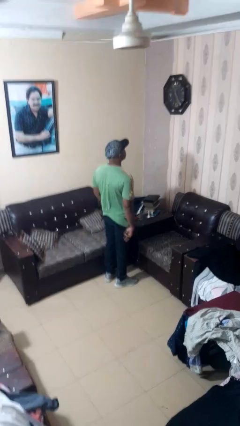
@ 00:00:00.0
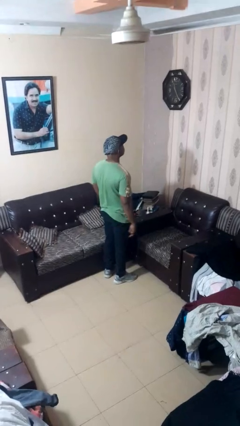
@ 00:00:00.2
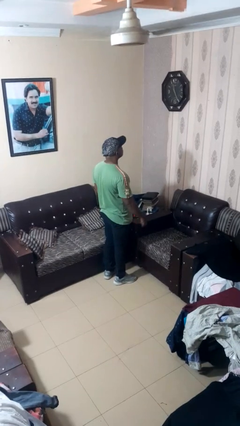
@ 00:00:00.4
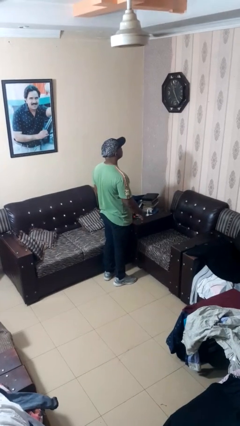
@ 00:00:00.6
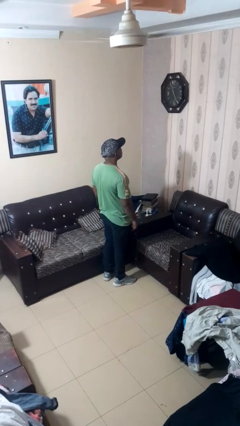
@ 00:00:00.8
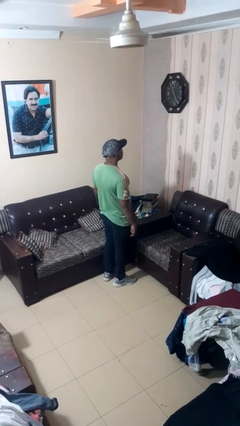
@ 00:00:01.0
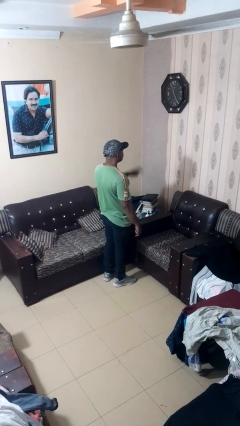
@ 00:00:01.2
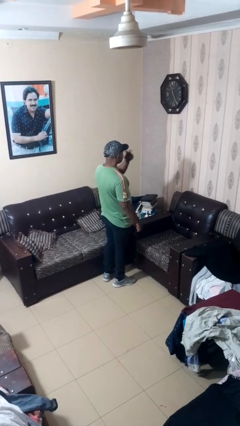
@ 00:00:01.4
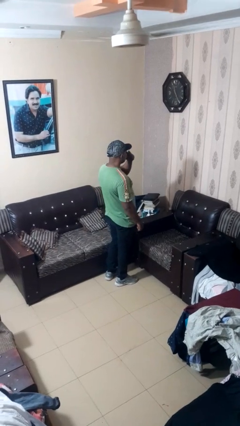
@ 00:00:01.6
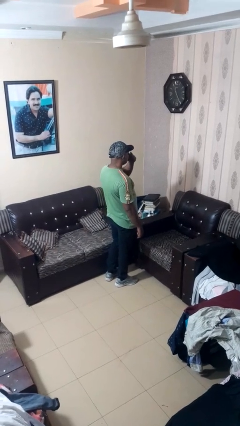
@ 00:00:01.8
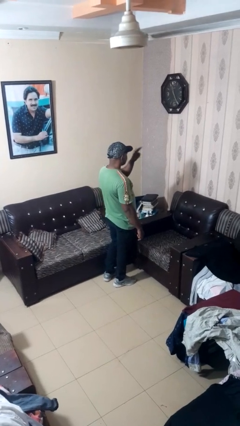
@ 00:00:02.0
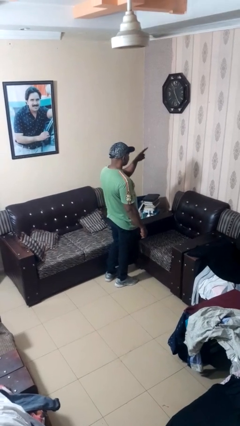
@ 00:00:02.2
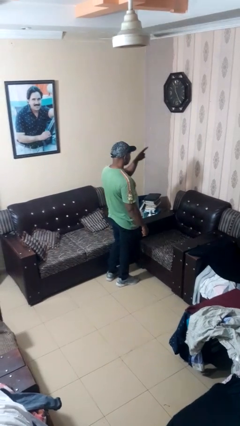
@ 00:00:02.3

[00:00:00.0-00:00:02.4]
person gestures watch closely

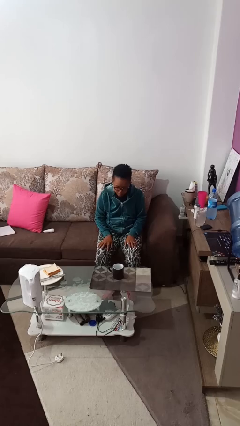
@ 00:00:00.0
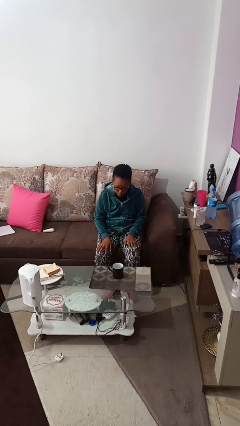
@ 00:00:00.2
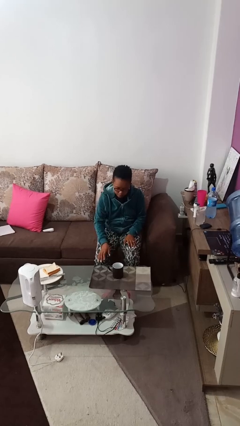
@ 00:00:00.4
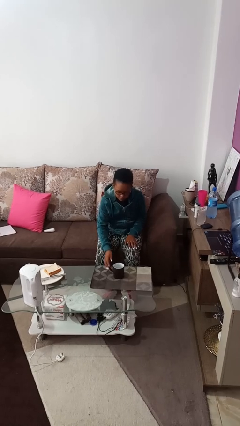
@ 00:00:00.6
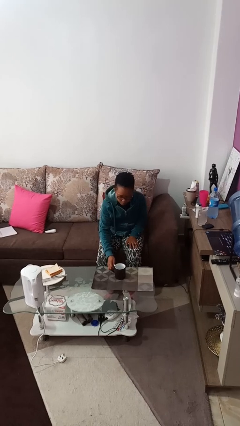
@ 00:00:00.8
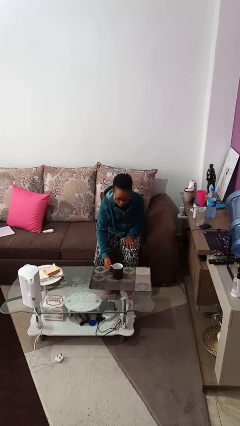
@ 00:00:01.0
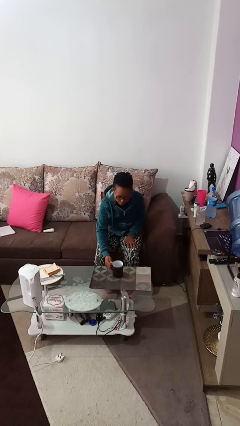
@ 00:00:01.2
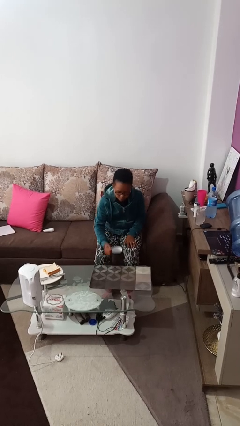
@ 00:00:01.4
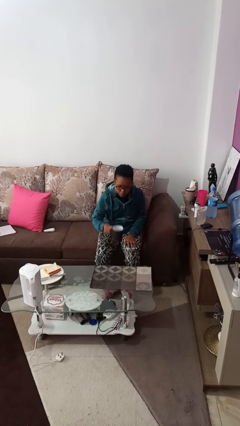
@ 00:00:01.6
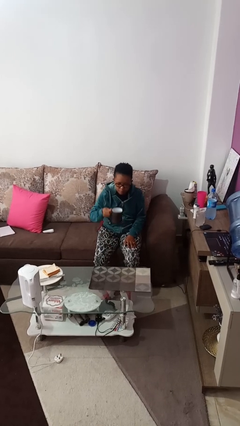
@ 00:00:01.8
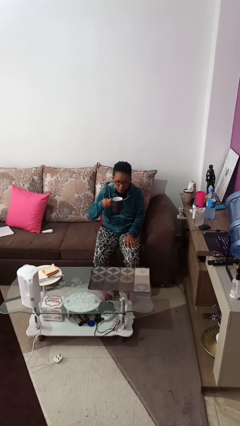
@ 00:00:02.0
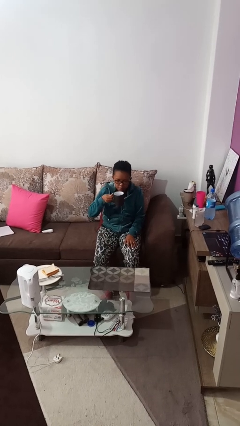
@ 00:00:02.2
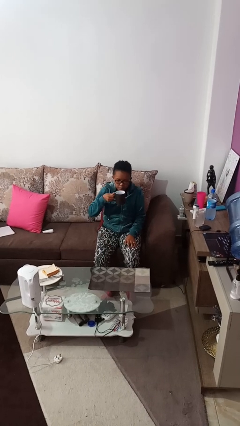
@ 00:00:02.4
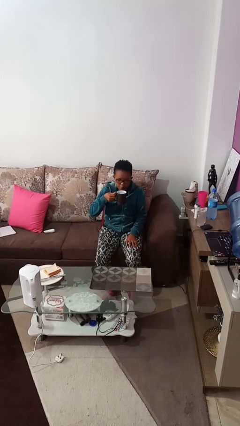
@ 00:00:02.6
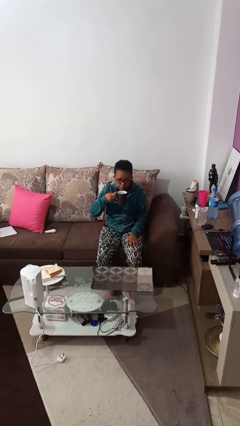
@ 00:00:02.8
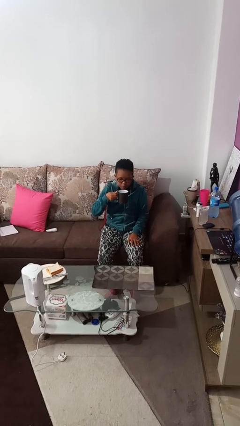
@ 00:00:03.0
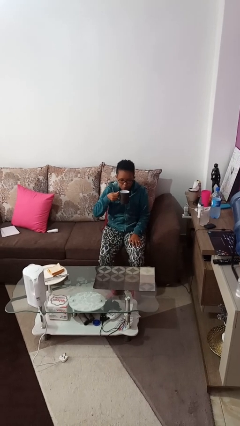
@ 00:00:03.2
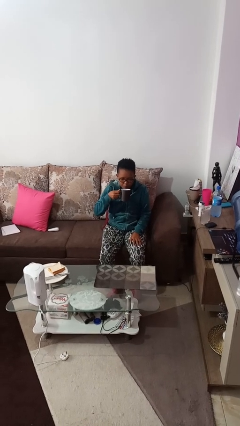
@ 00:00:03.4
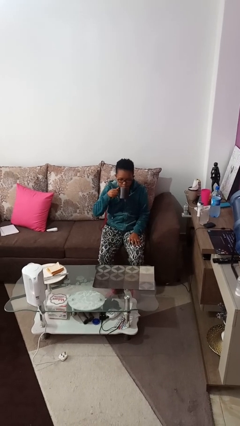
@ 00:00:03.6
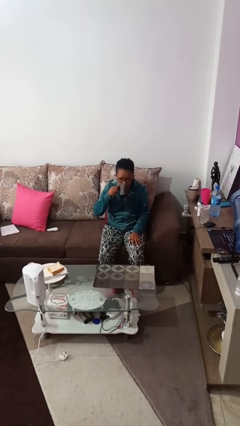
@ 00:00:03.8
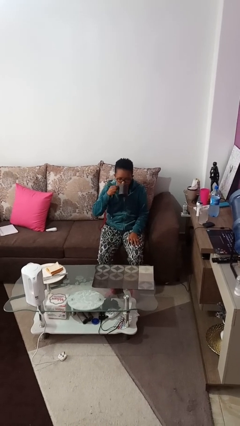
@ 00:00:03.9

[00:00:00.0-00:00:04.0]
person picks up object from table

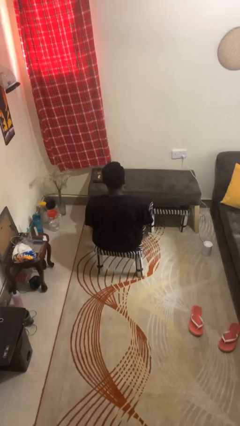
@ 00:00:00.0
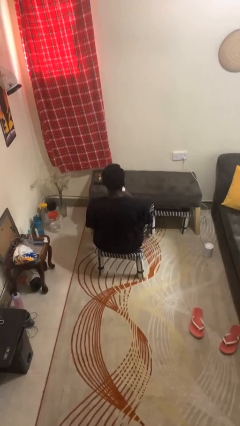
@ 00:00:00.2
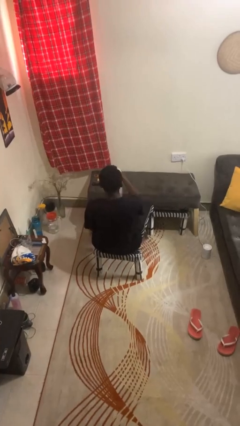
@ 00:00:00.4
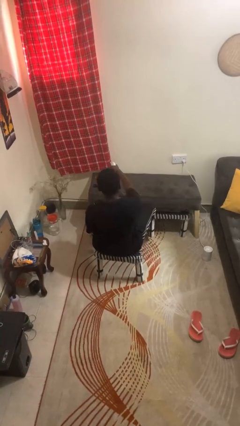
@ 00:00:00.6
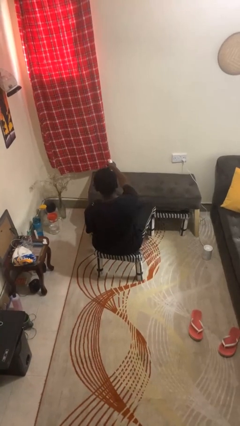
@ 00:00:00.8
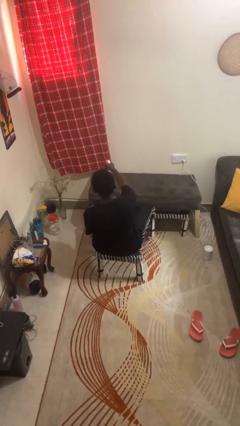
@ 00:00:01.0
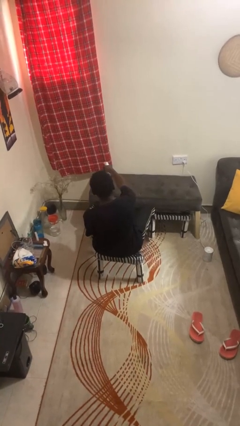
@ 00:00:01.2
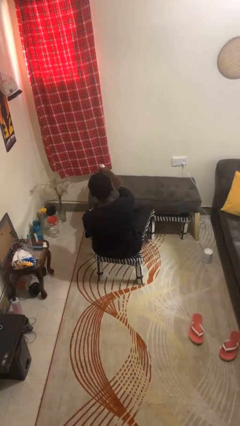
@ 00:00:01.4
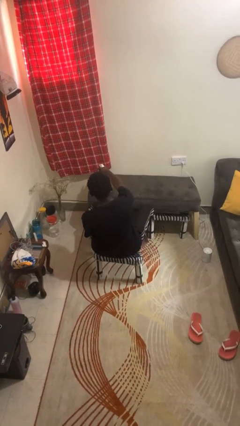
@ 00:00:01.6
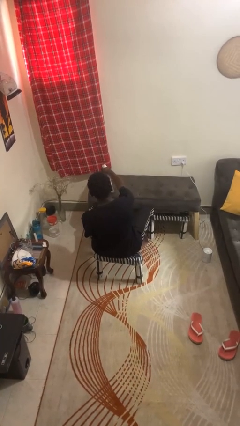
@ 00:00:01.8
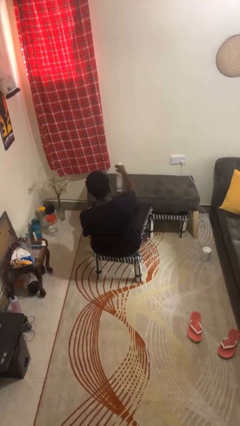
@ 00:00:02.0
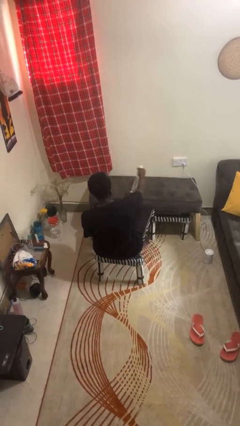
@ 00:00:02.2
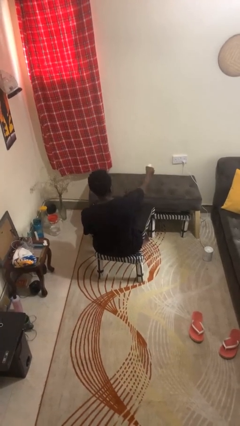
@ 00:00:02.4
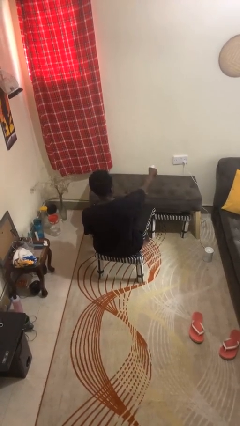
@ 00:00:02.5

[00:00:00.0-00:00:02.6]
person sprays from bottle

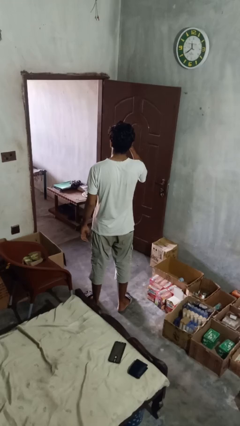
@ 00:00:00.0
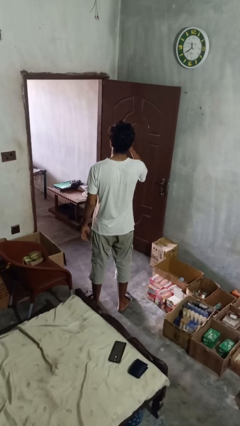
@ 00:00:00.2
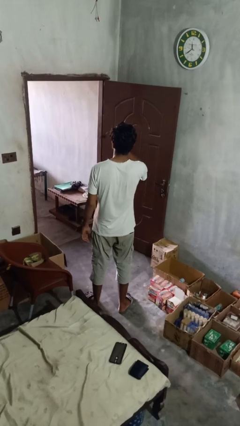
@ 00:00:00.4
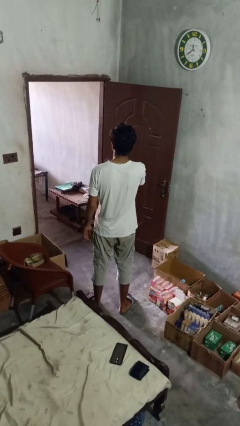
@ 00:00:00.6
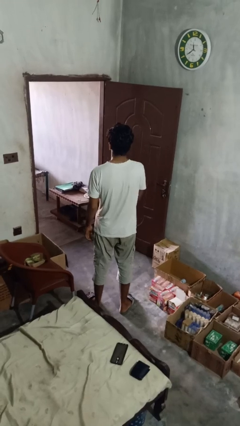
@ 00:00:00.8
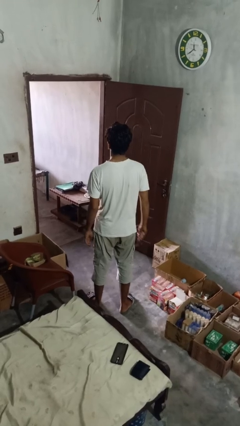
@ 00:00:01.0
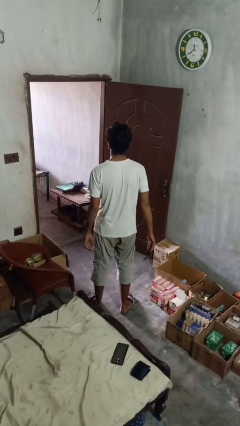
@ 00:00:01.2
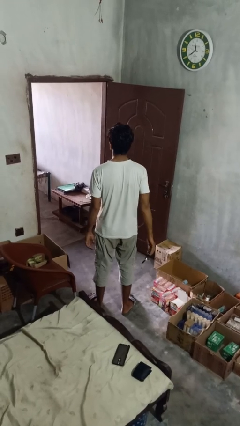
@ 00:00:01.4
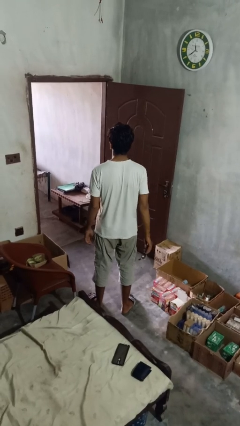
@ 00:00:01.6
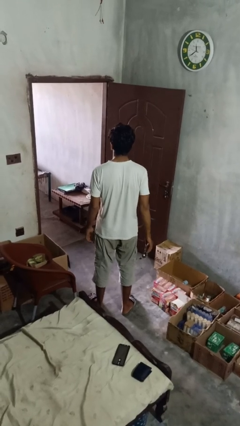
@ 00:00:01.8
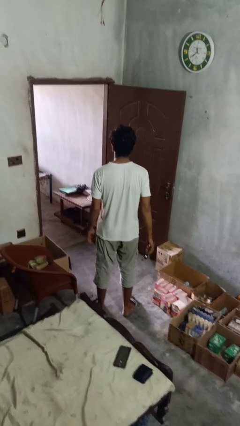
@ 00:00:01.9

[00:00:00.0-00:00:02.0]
person takes off glasses

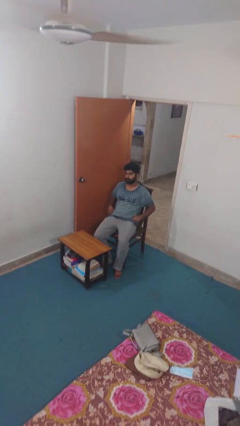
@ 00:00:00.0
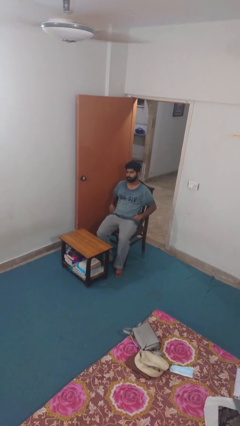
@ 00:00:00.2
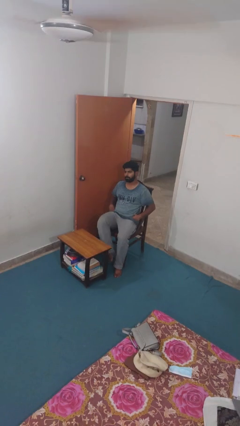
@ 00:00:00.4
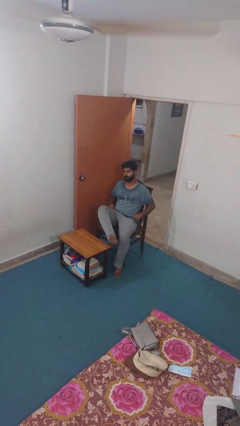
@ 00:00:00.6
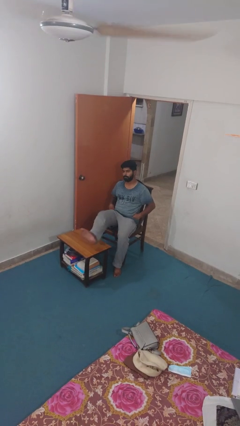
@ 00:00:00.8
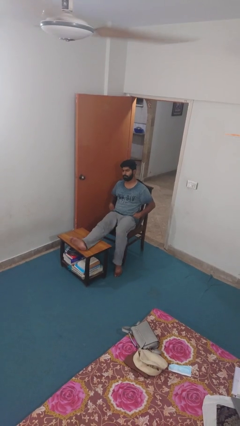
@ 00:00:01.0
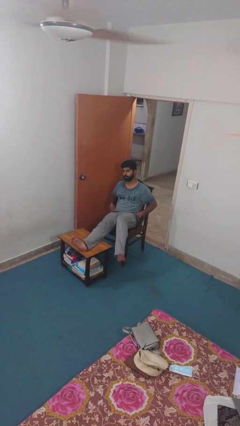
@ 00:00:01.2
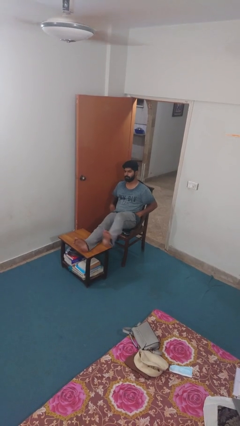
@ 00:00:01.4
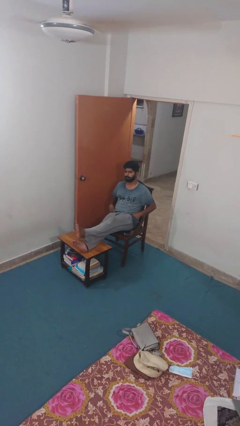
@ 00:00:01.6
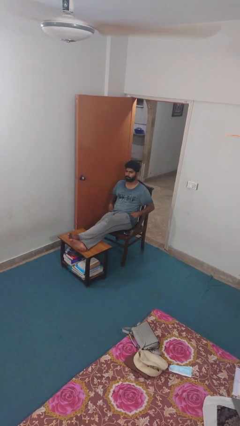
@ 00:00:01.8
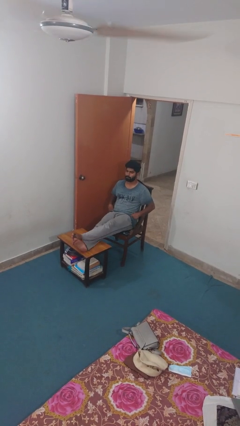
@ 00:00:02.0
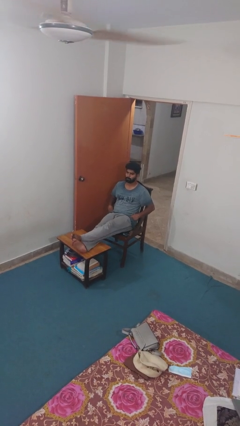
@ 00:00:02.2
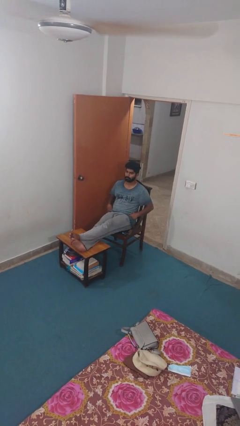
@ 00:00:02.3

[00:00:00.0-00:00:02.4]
person puts feet up

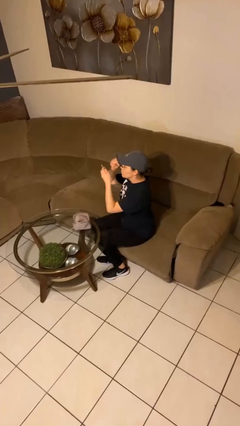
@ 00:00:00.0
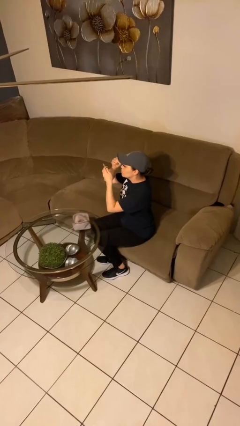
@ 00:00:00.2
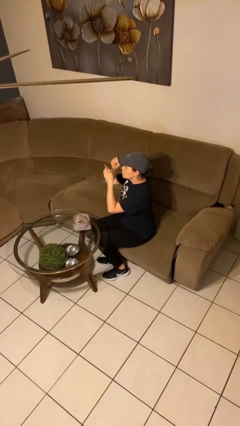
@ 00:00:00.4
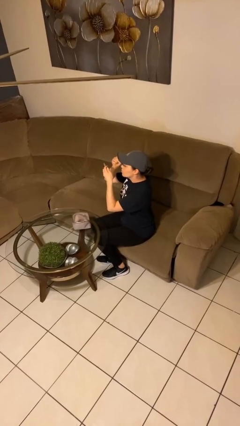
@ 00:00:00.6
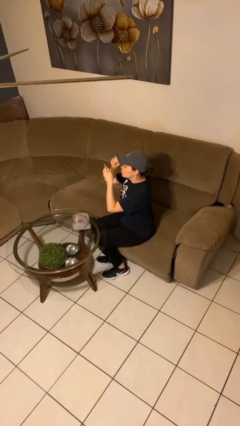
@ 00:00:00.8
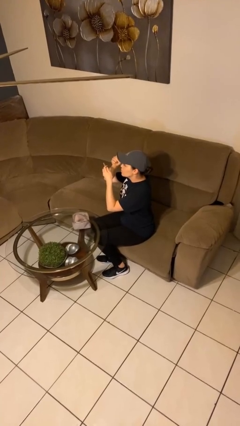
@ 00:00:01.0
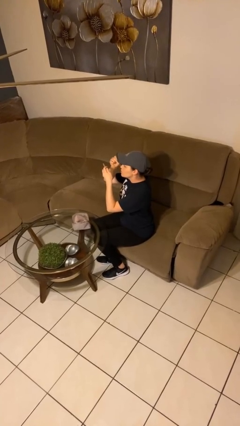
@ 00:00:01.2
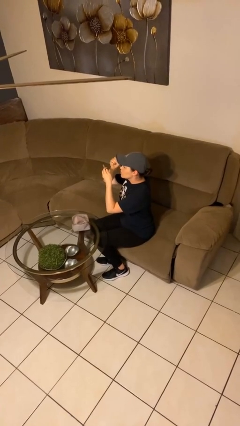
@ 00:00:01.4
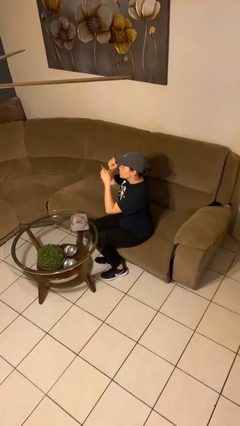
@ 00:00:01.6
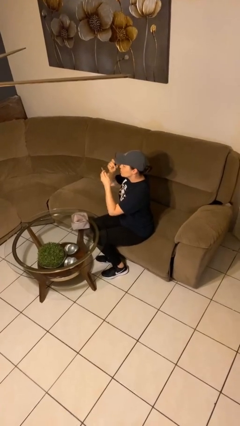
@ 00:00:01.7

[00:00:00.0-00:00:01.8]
person applies eye makeup

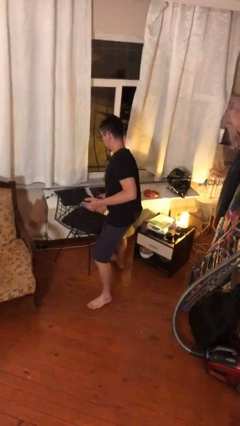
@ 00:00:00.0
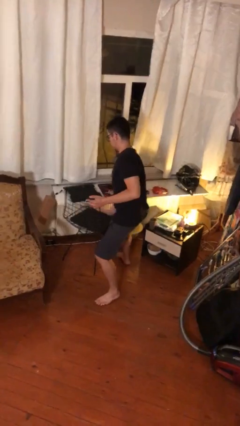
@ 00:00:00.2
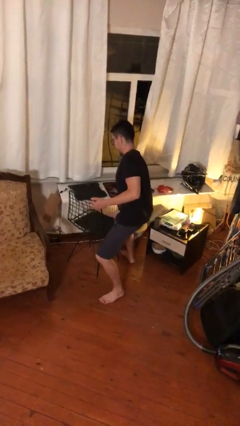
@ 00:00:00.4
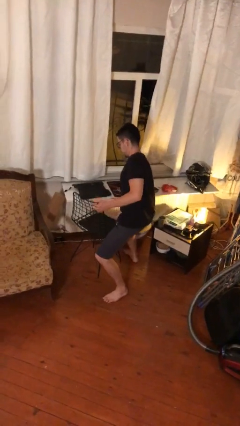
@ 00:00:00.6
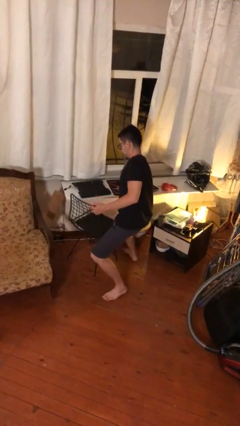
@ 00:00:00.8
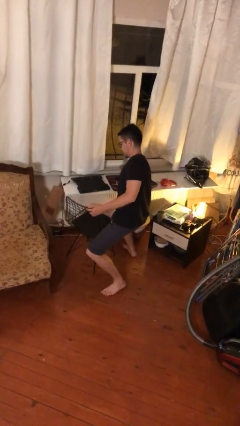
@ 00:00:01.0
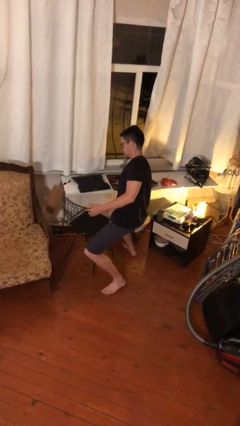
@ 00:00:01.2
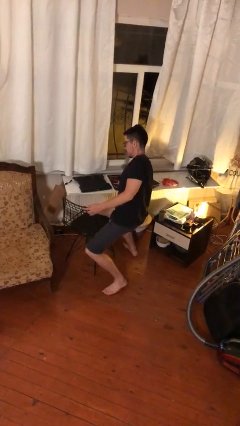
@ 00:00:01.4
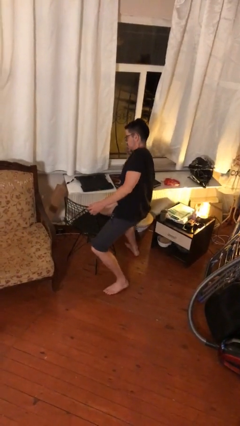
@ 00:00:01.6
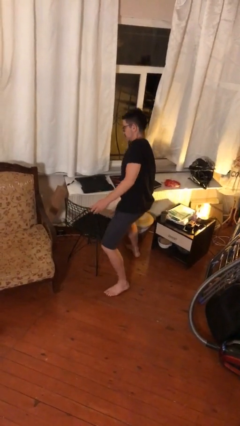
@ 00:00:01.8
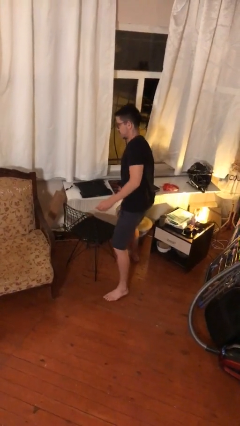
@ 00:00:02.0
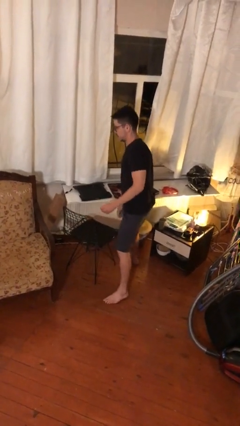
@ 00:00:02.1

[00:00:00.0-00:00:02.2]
person puts down object on floor
